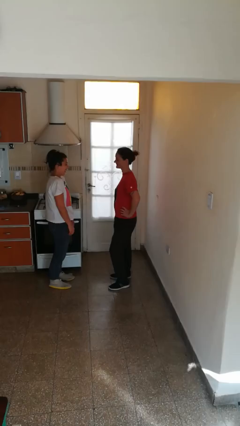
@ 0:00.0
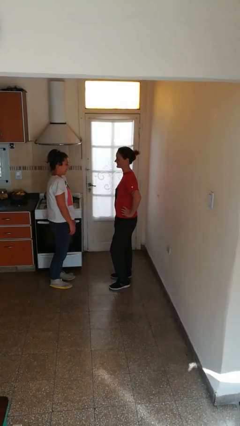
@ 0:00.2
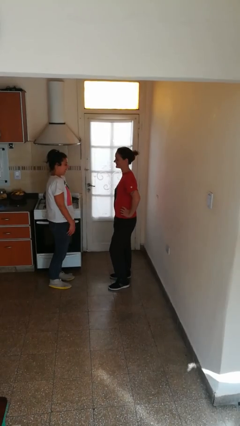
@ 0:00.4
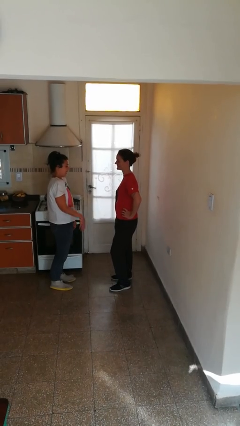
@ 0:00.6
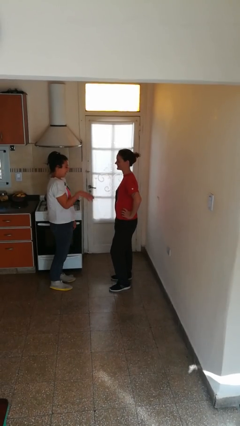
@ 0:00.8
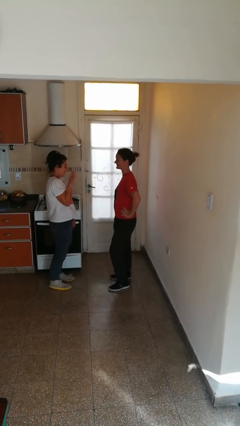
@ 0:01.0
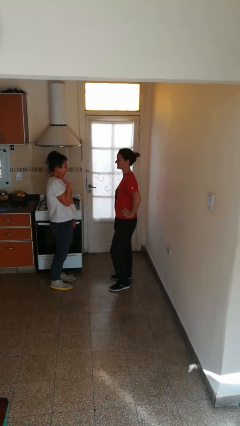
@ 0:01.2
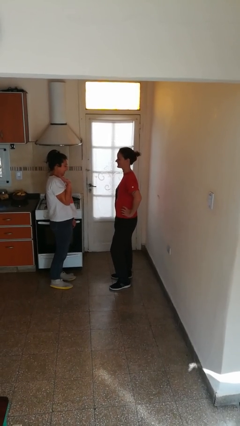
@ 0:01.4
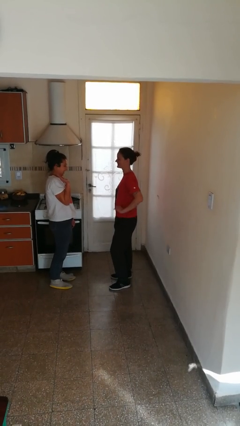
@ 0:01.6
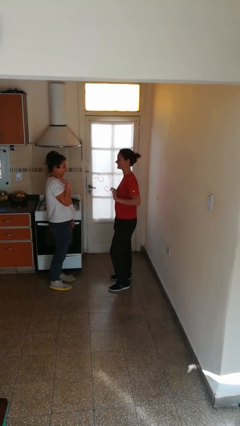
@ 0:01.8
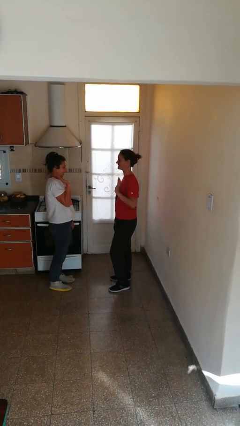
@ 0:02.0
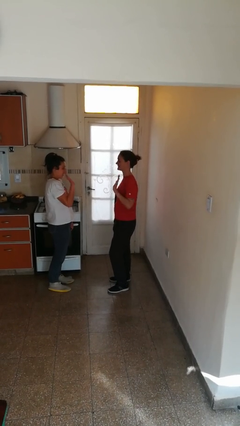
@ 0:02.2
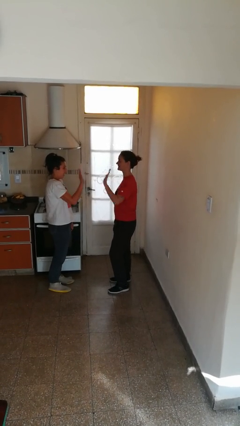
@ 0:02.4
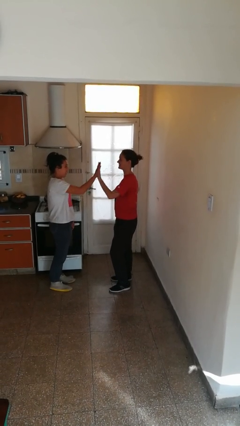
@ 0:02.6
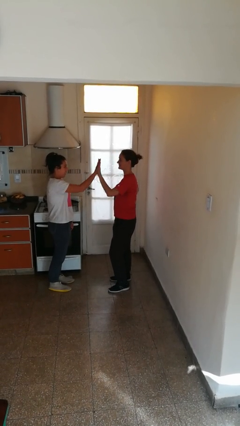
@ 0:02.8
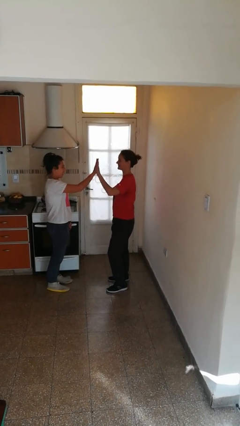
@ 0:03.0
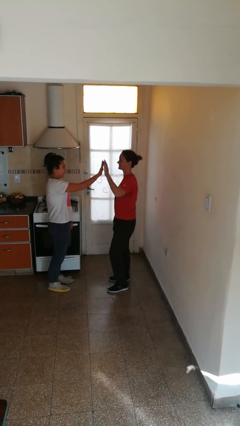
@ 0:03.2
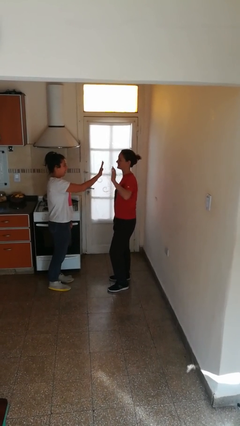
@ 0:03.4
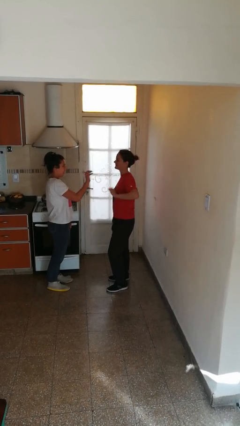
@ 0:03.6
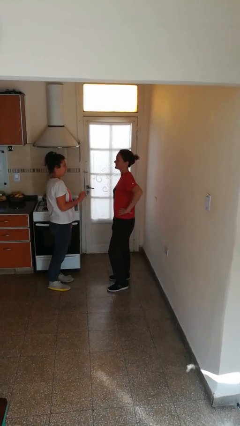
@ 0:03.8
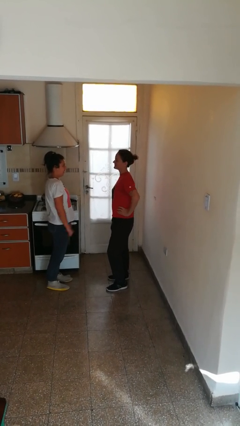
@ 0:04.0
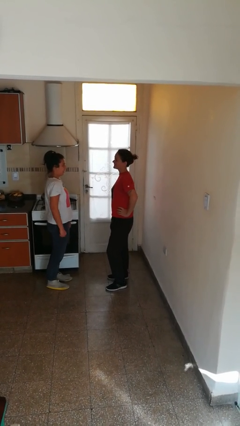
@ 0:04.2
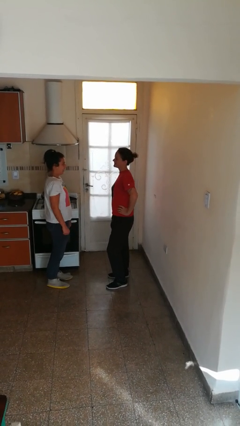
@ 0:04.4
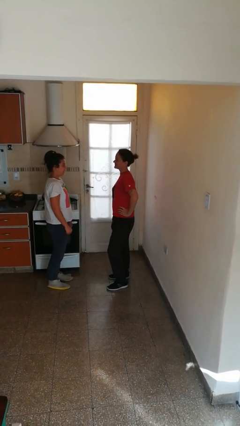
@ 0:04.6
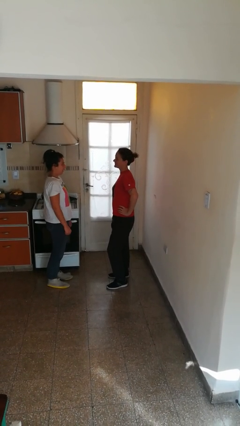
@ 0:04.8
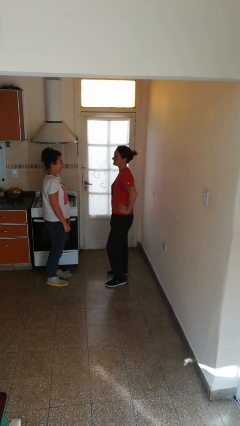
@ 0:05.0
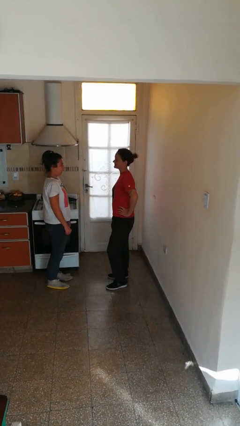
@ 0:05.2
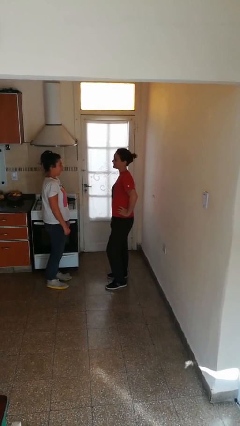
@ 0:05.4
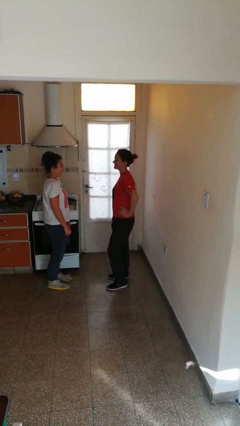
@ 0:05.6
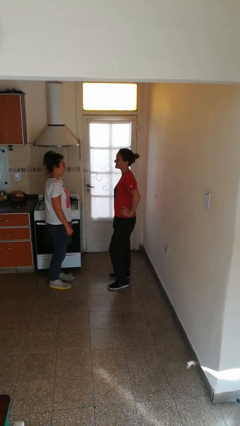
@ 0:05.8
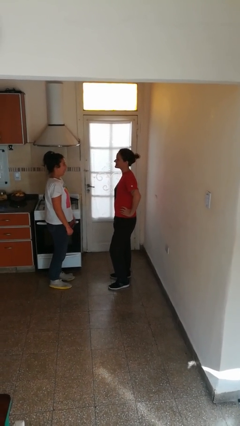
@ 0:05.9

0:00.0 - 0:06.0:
person highfives hand

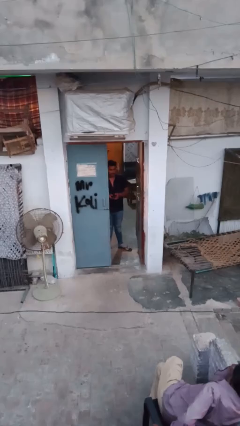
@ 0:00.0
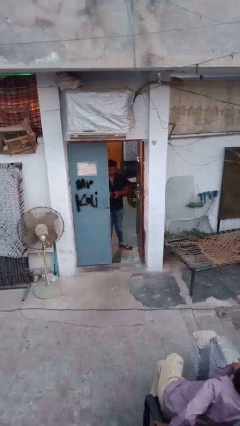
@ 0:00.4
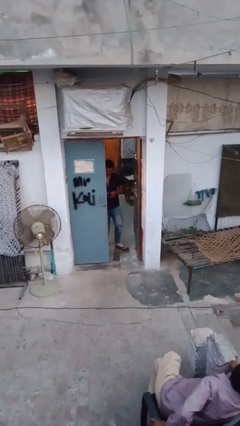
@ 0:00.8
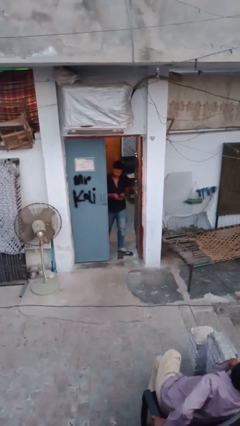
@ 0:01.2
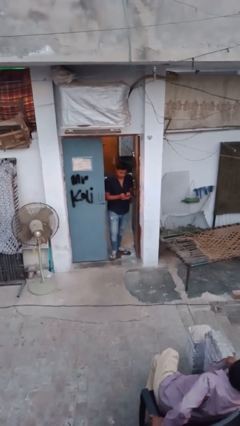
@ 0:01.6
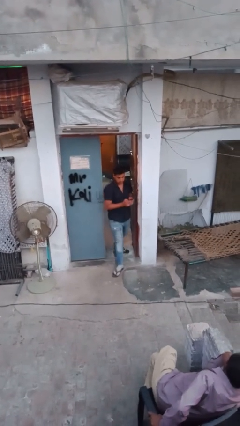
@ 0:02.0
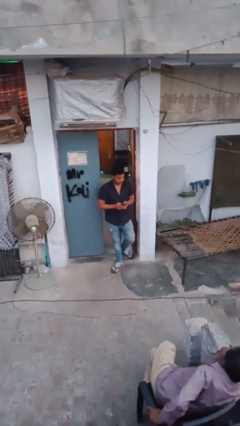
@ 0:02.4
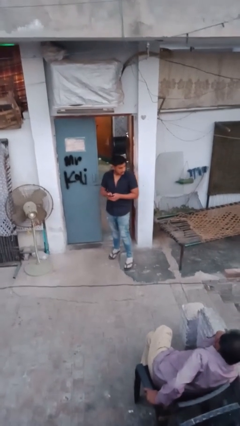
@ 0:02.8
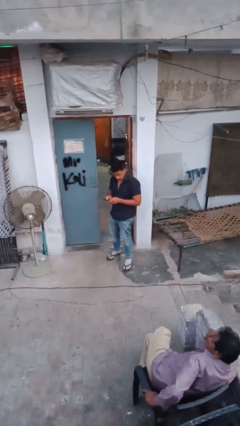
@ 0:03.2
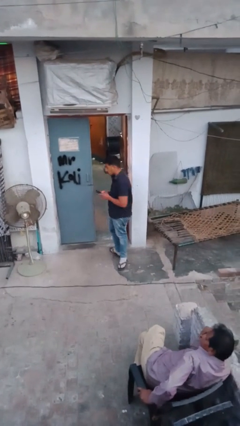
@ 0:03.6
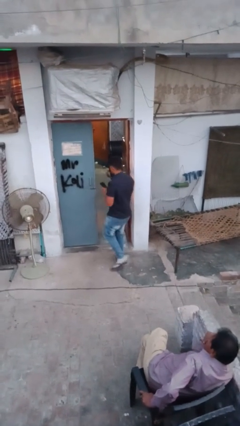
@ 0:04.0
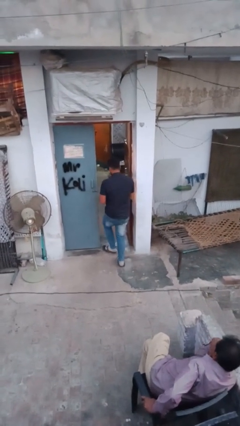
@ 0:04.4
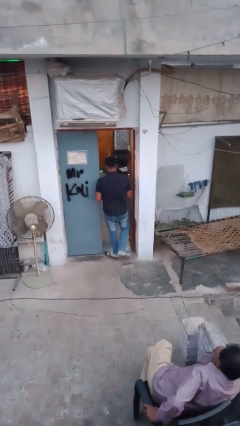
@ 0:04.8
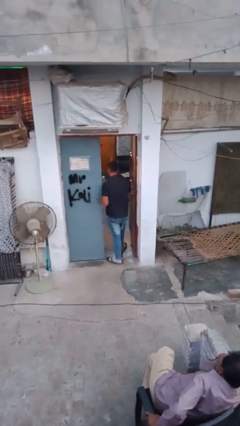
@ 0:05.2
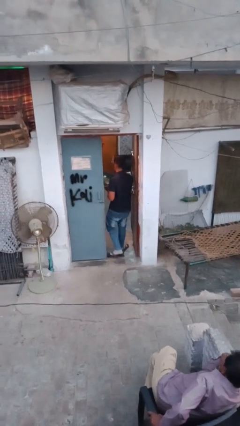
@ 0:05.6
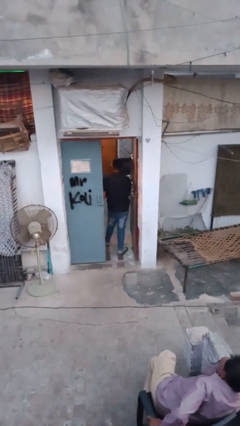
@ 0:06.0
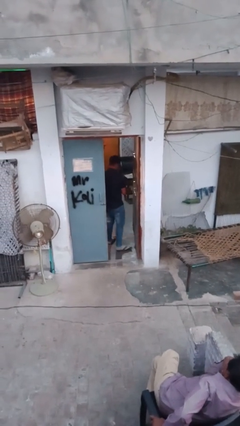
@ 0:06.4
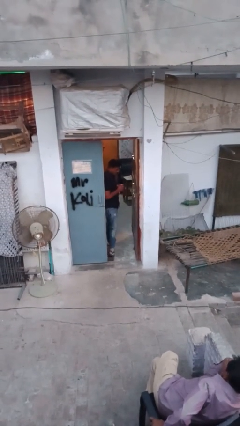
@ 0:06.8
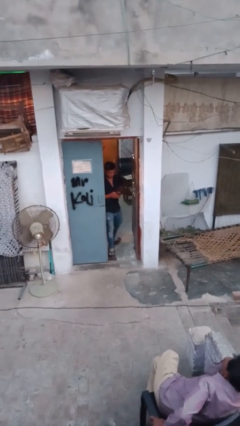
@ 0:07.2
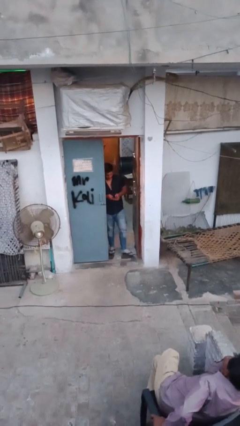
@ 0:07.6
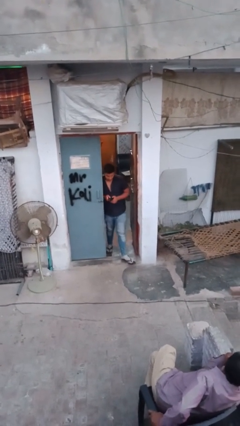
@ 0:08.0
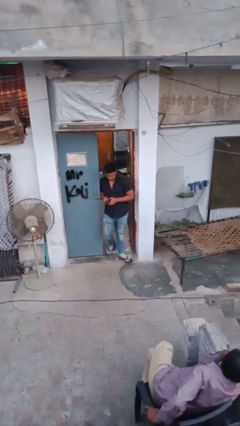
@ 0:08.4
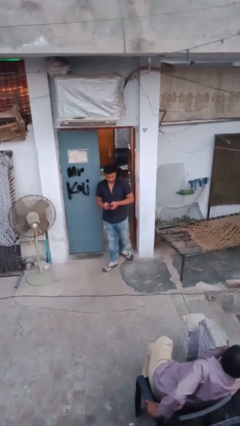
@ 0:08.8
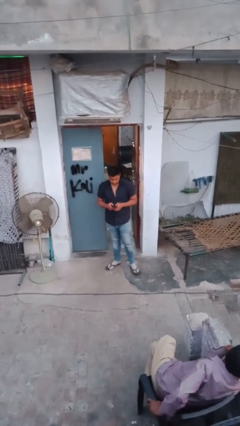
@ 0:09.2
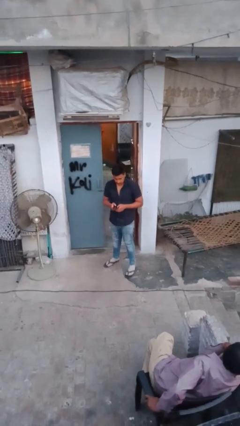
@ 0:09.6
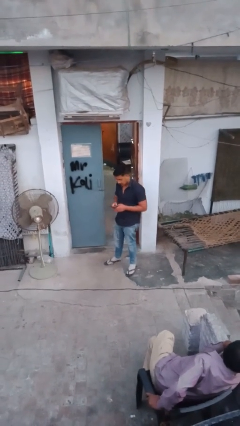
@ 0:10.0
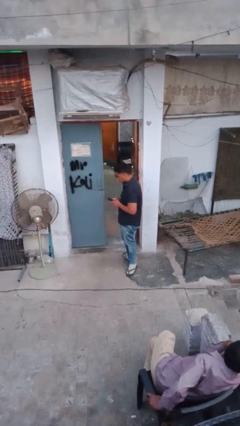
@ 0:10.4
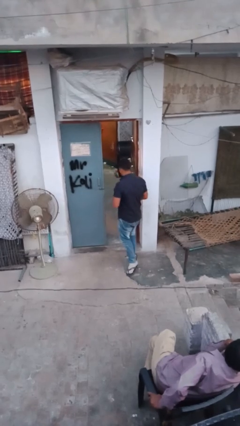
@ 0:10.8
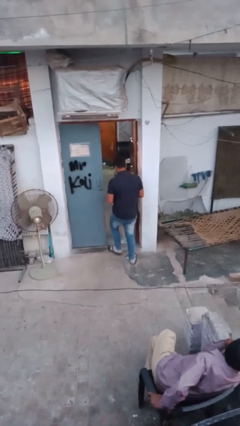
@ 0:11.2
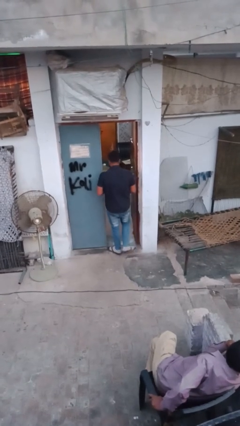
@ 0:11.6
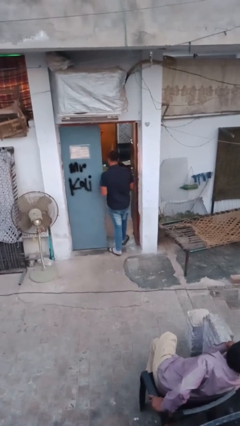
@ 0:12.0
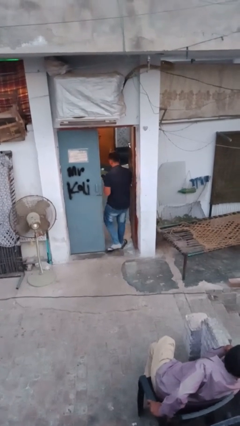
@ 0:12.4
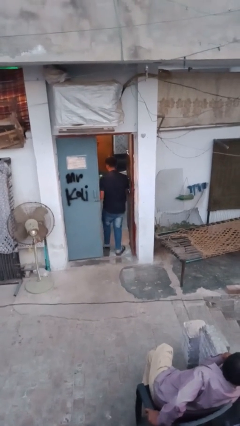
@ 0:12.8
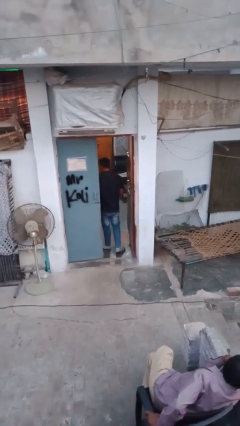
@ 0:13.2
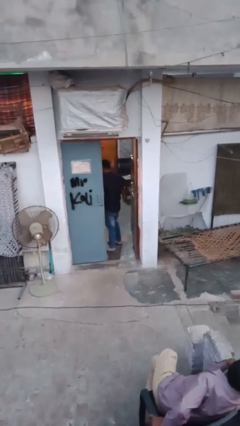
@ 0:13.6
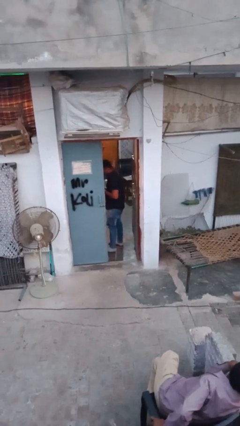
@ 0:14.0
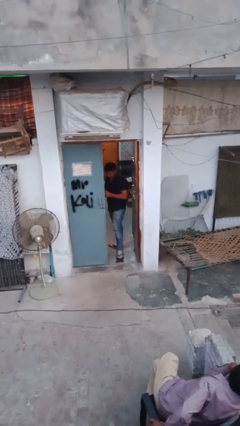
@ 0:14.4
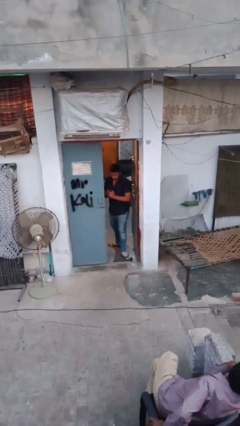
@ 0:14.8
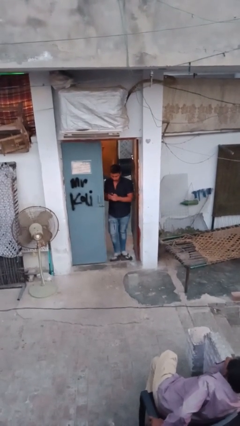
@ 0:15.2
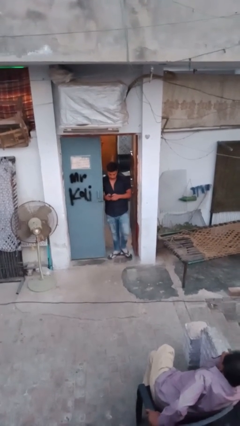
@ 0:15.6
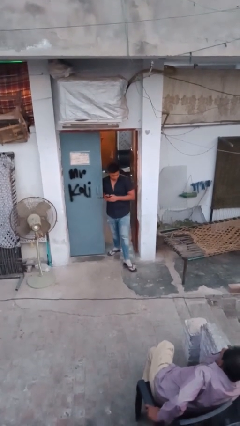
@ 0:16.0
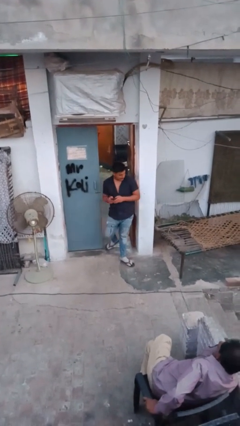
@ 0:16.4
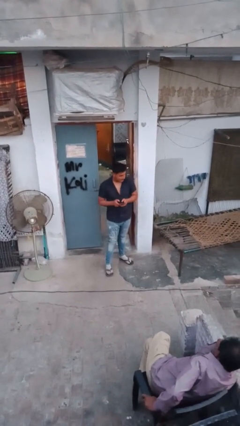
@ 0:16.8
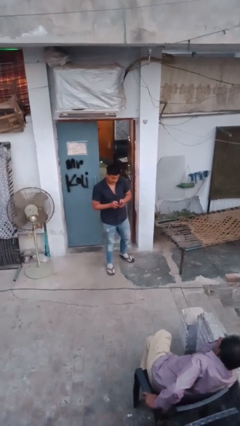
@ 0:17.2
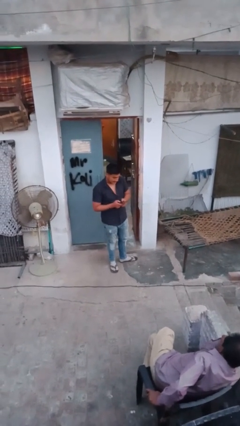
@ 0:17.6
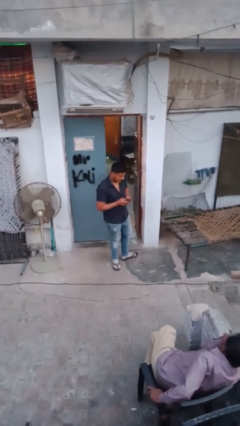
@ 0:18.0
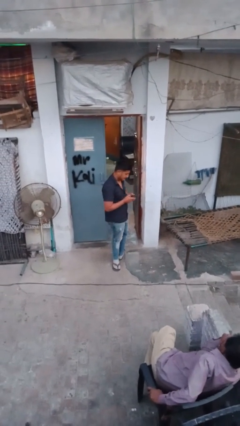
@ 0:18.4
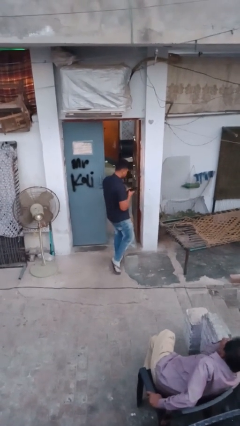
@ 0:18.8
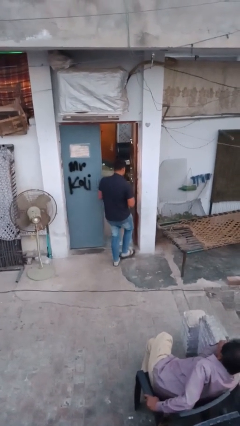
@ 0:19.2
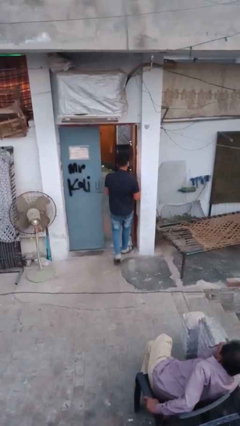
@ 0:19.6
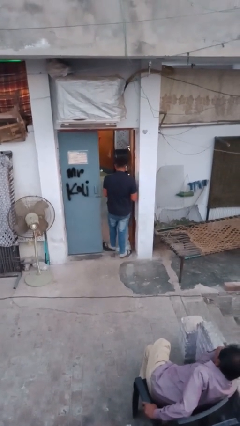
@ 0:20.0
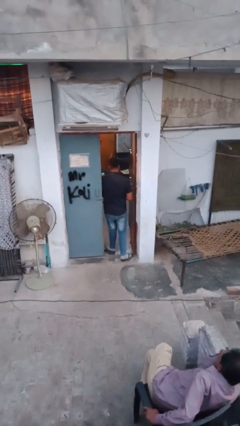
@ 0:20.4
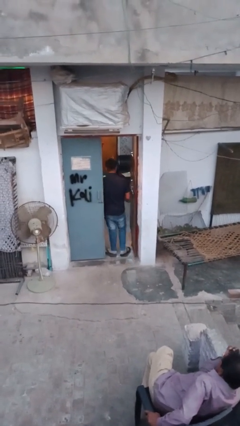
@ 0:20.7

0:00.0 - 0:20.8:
person texts on phone

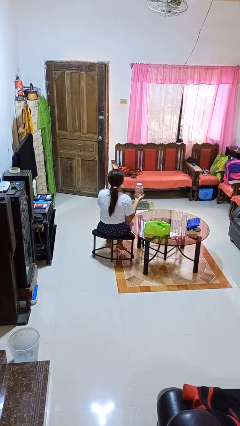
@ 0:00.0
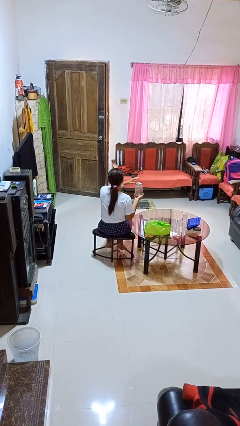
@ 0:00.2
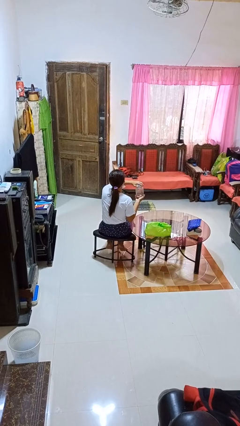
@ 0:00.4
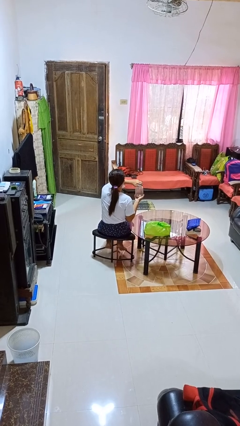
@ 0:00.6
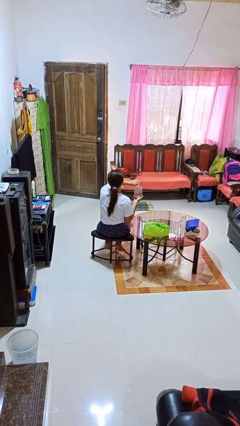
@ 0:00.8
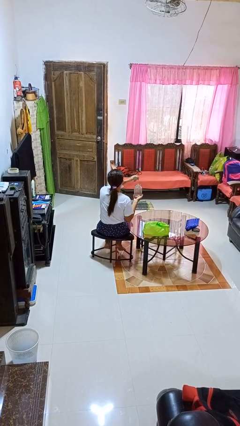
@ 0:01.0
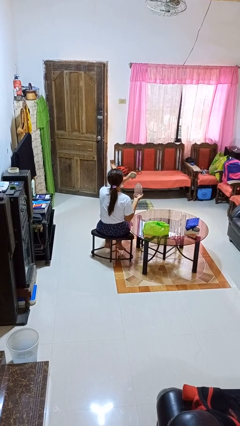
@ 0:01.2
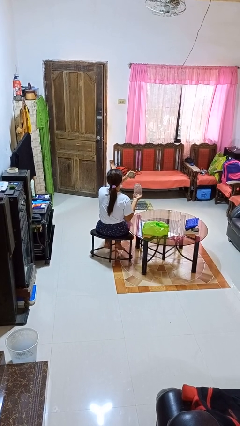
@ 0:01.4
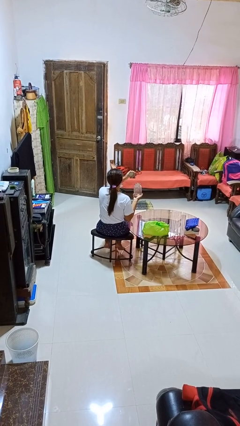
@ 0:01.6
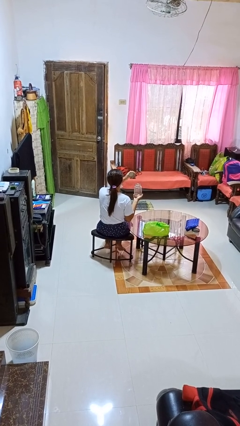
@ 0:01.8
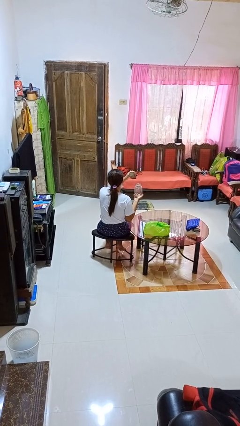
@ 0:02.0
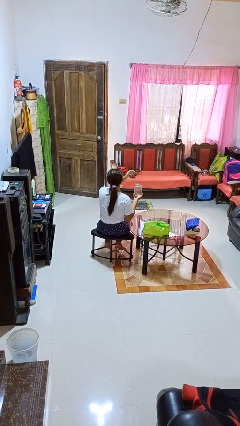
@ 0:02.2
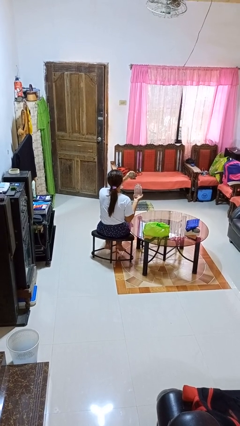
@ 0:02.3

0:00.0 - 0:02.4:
person opens jar
